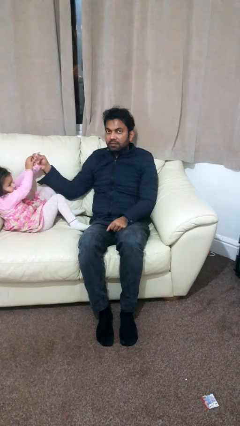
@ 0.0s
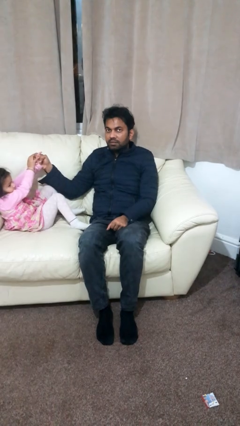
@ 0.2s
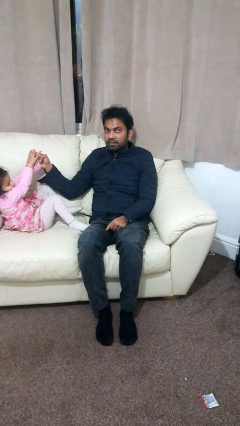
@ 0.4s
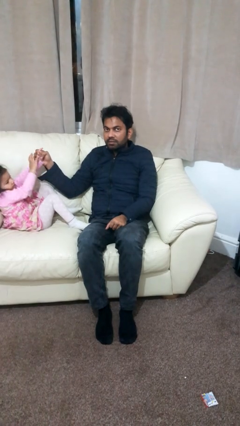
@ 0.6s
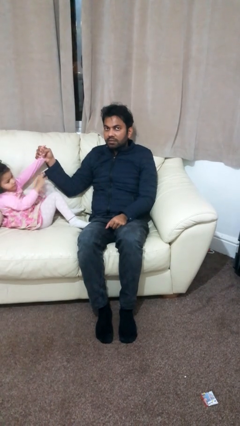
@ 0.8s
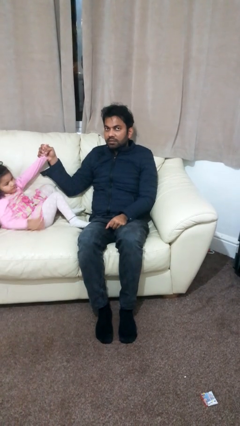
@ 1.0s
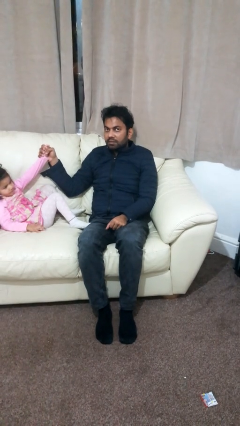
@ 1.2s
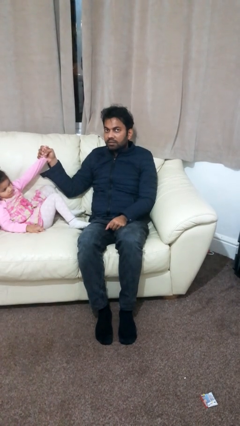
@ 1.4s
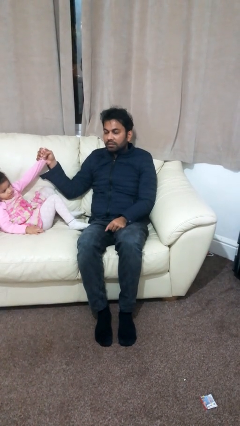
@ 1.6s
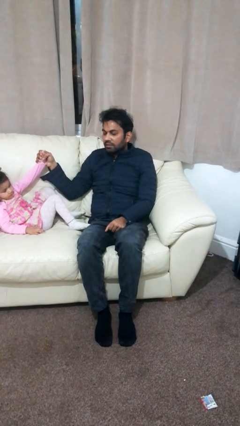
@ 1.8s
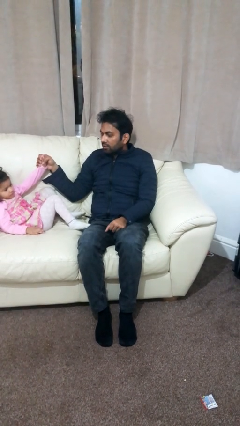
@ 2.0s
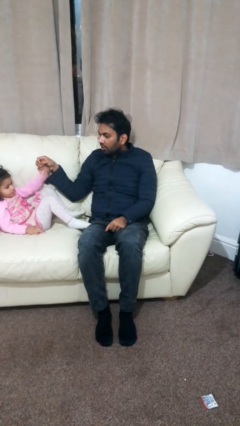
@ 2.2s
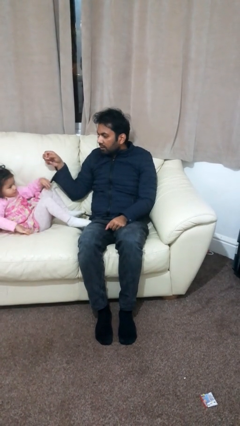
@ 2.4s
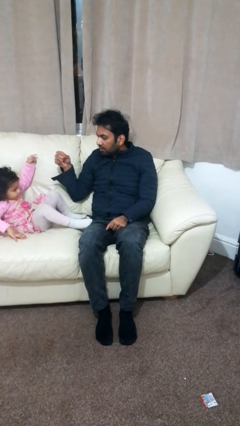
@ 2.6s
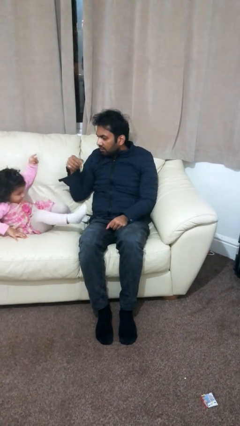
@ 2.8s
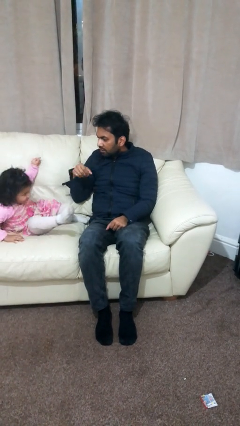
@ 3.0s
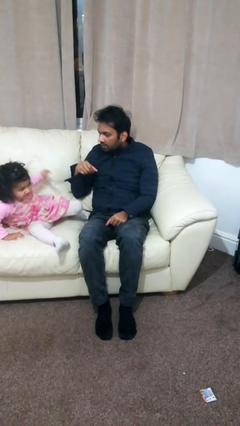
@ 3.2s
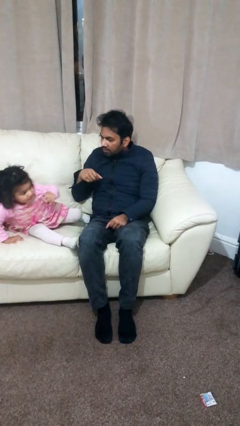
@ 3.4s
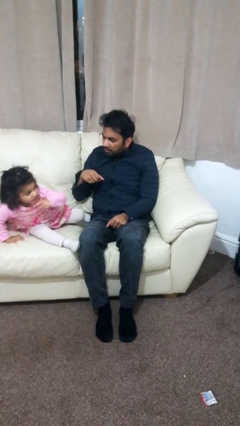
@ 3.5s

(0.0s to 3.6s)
person highfives hand

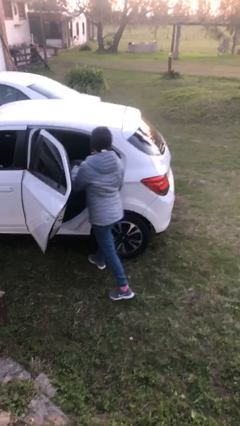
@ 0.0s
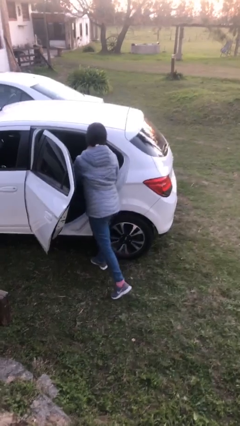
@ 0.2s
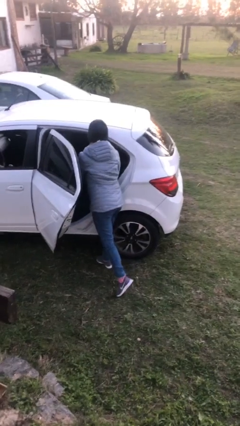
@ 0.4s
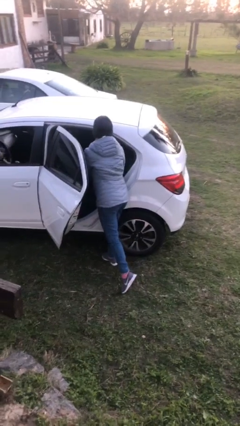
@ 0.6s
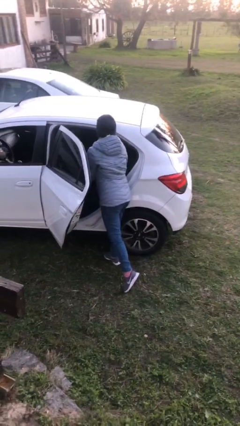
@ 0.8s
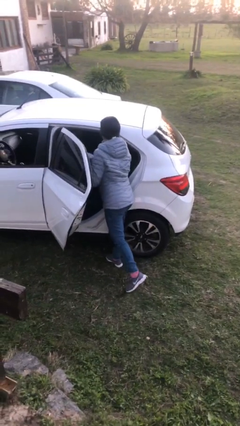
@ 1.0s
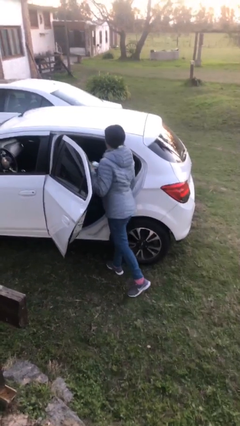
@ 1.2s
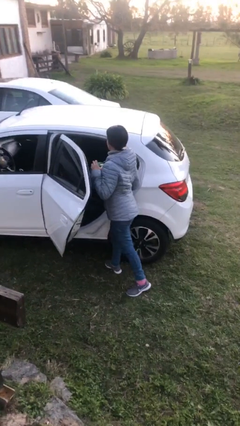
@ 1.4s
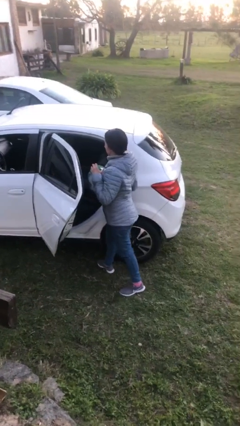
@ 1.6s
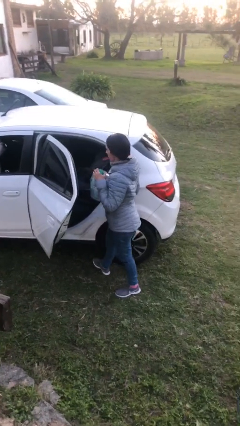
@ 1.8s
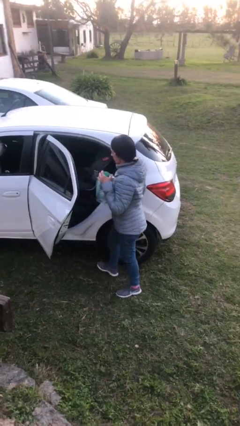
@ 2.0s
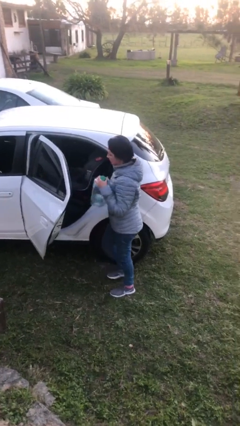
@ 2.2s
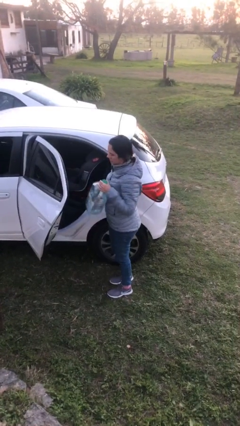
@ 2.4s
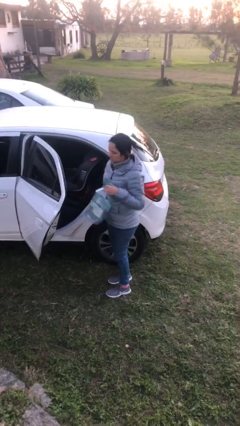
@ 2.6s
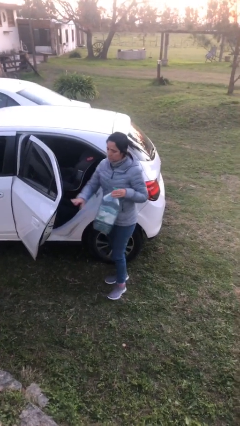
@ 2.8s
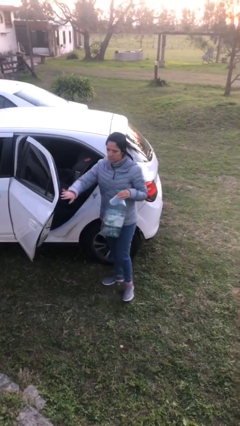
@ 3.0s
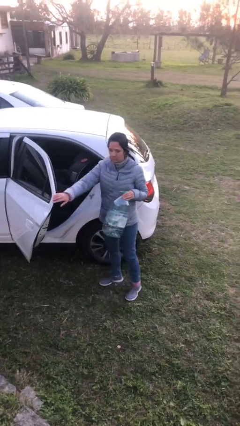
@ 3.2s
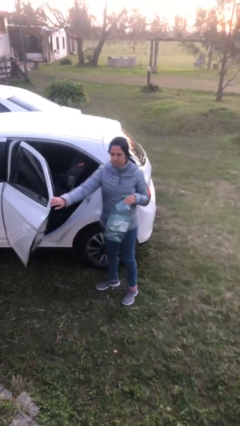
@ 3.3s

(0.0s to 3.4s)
person unloads car

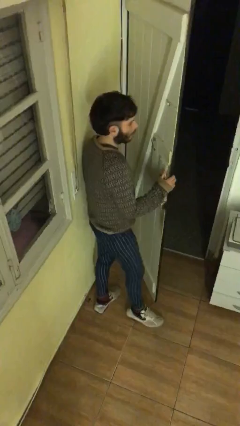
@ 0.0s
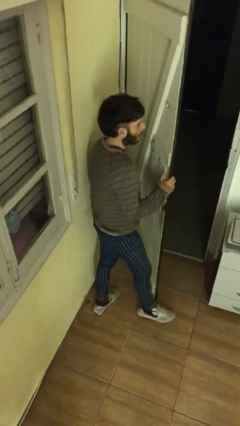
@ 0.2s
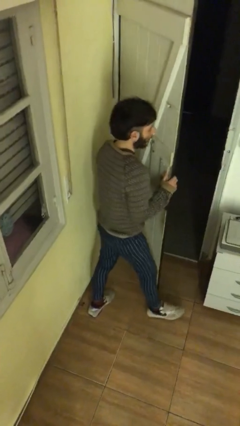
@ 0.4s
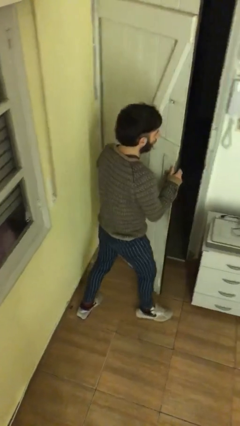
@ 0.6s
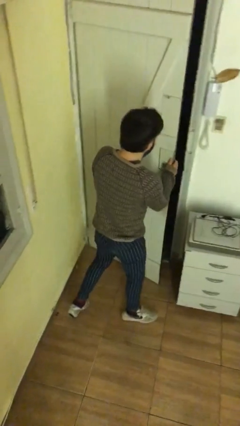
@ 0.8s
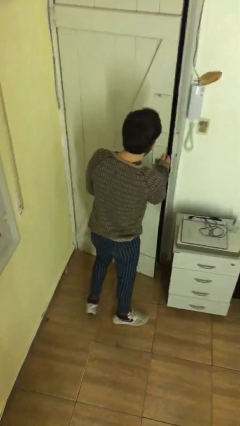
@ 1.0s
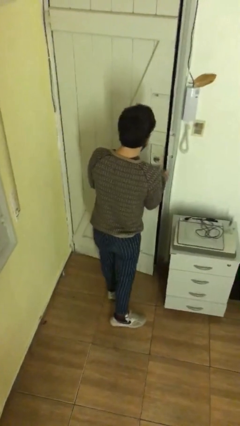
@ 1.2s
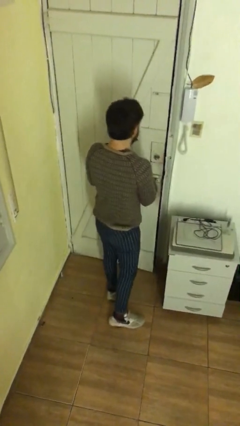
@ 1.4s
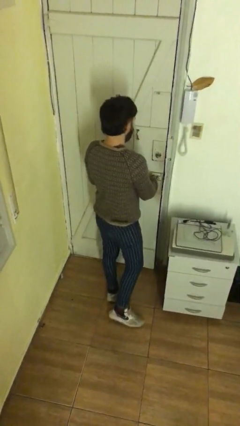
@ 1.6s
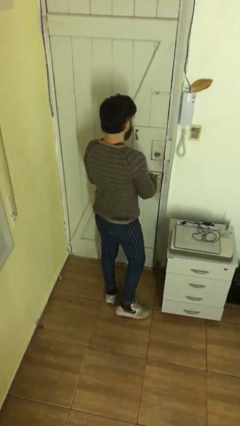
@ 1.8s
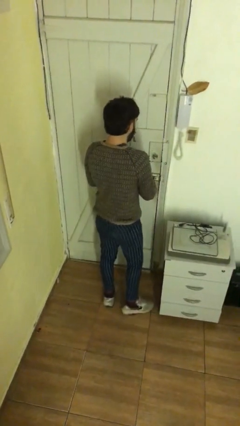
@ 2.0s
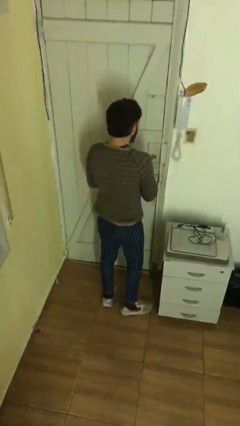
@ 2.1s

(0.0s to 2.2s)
person closes facility door

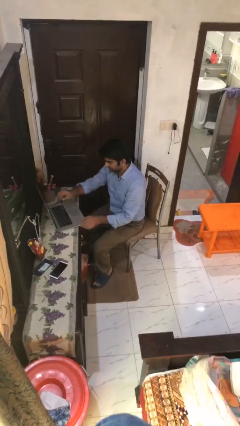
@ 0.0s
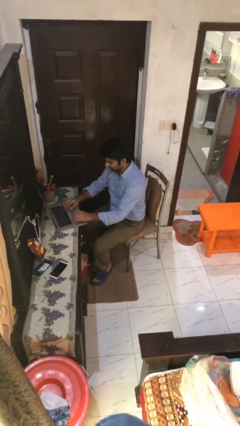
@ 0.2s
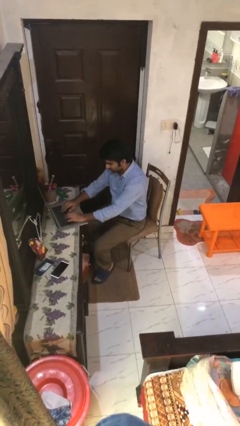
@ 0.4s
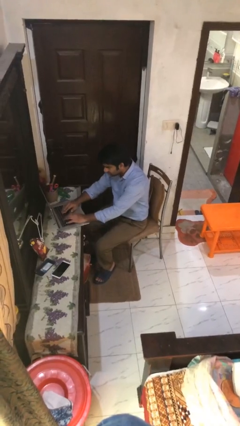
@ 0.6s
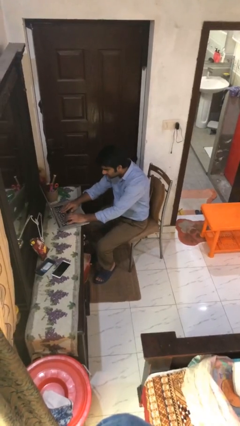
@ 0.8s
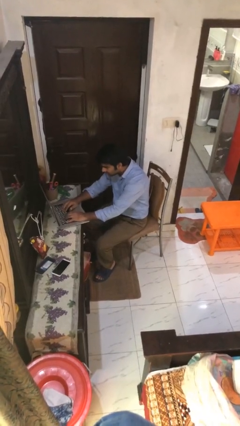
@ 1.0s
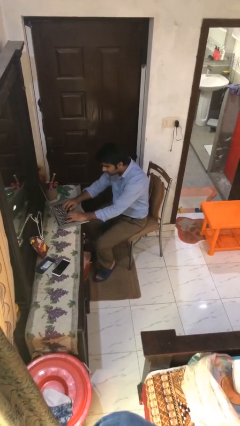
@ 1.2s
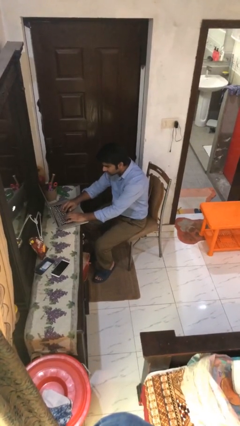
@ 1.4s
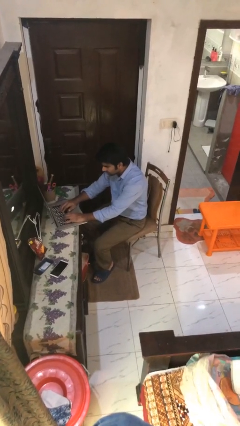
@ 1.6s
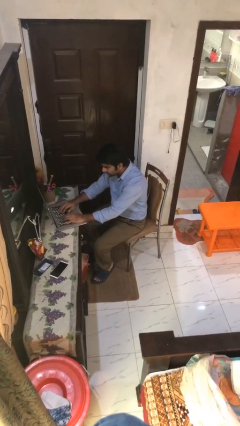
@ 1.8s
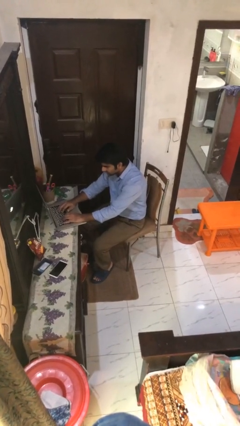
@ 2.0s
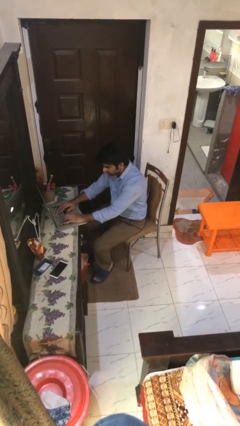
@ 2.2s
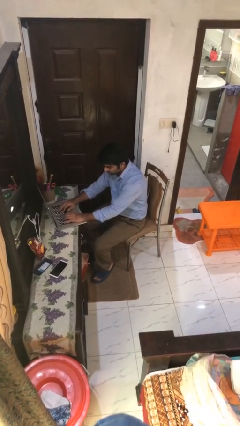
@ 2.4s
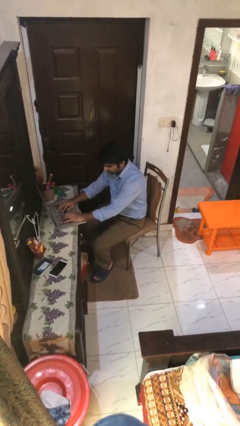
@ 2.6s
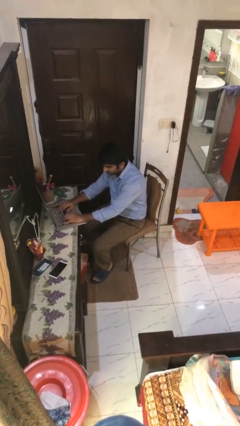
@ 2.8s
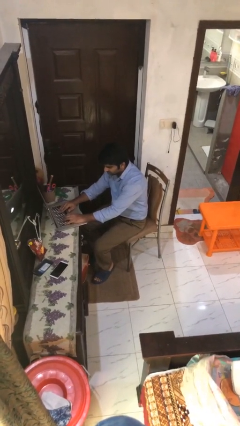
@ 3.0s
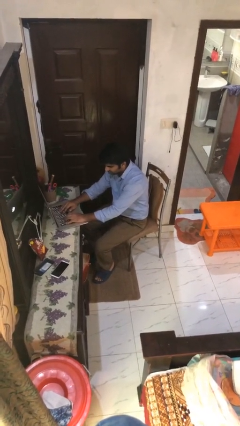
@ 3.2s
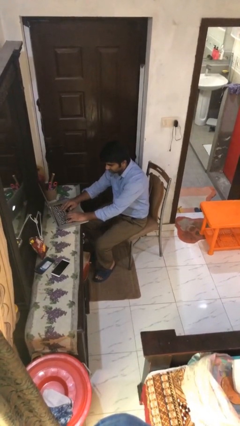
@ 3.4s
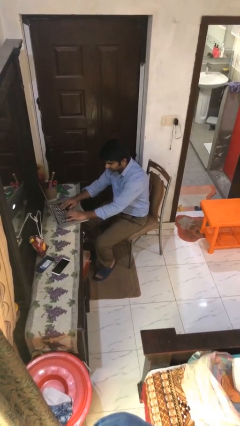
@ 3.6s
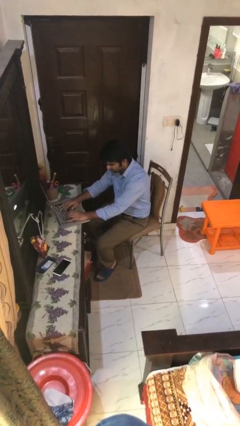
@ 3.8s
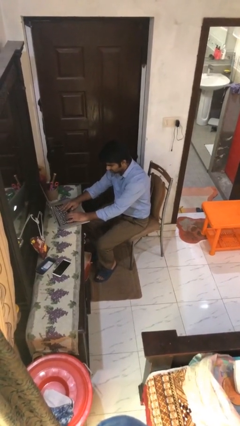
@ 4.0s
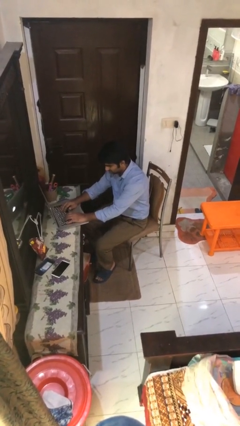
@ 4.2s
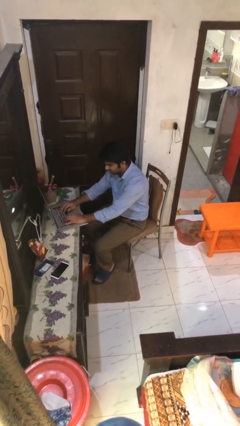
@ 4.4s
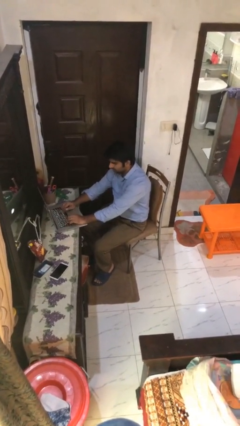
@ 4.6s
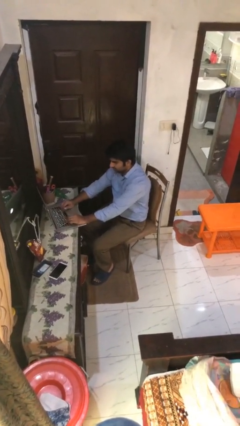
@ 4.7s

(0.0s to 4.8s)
person interacts with laptop

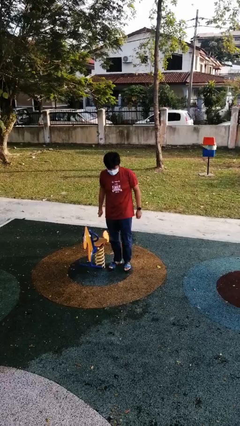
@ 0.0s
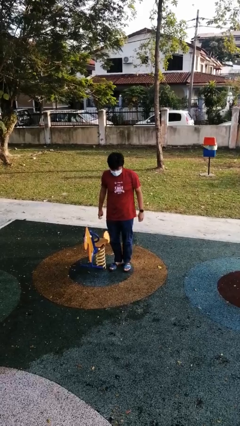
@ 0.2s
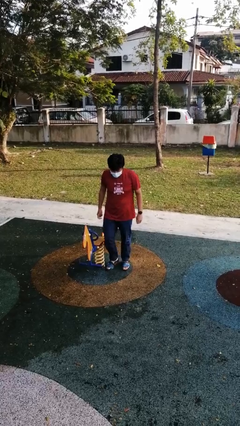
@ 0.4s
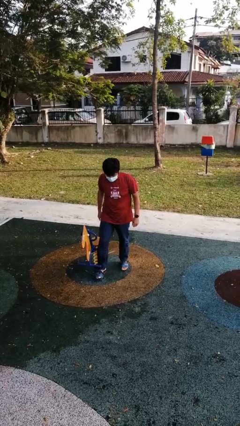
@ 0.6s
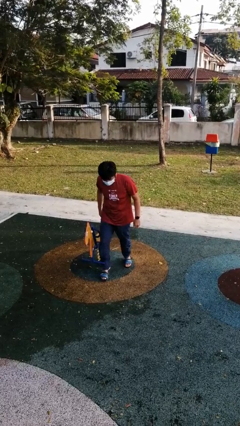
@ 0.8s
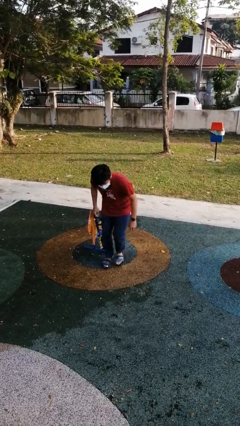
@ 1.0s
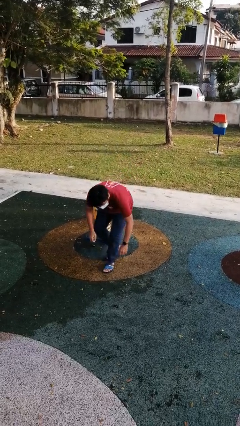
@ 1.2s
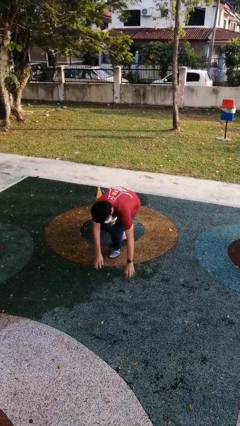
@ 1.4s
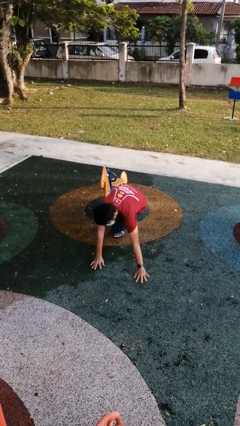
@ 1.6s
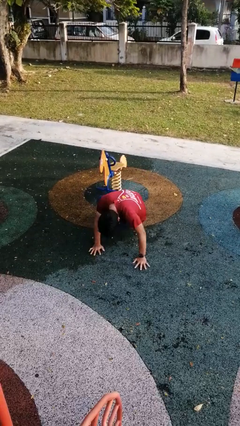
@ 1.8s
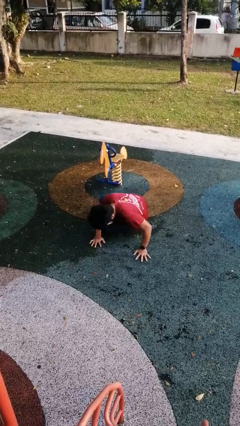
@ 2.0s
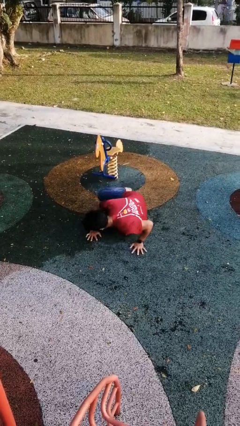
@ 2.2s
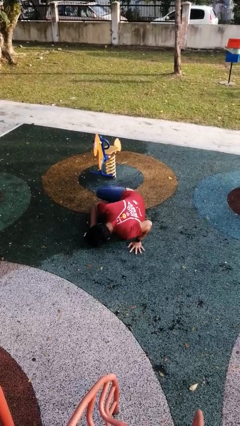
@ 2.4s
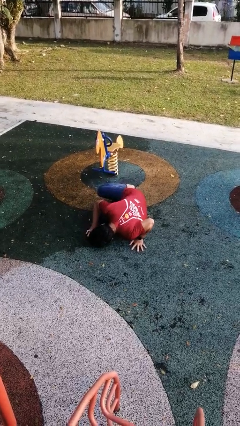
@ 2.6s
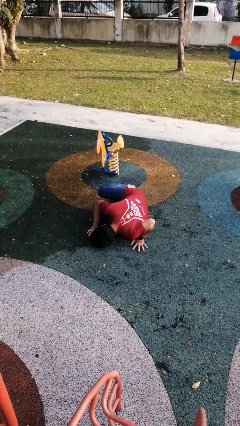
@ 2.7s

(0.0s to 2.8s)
person trips on object on floor

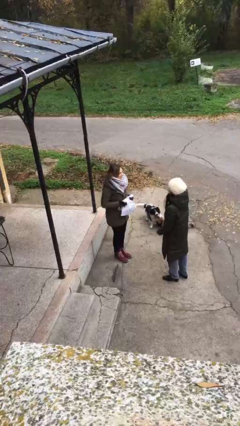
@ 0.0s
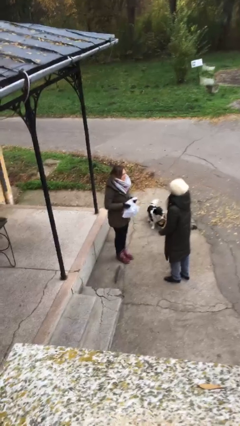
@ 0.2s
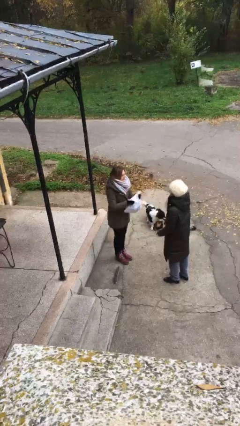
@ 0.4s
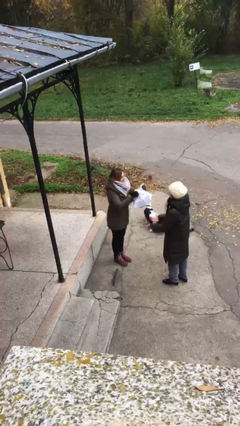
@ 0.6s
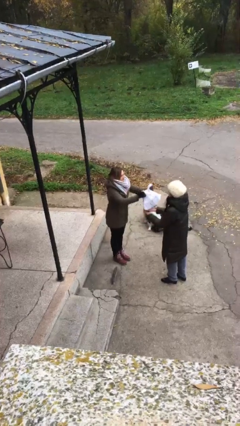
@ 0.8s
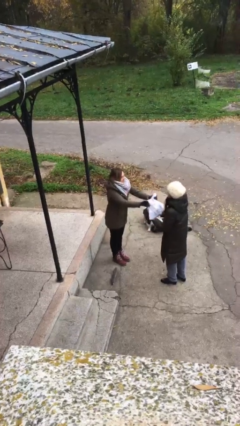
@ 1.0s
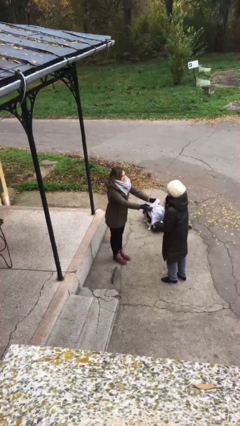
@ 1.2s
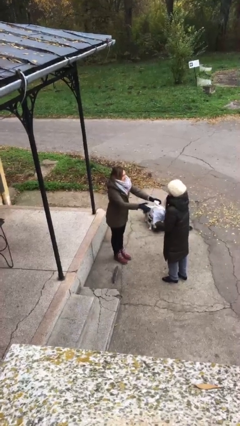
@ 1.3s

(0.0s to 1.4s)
person transfers object to person
